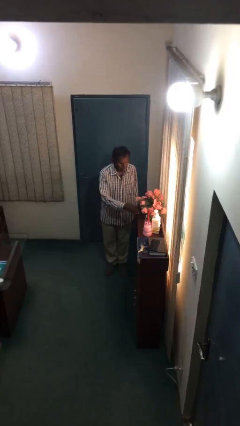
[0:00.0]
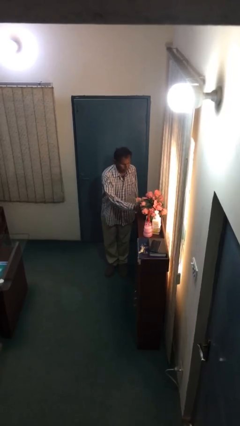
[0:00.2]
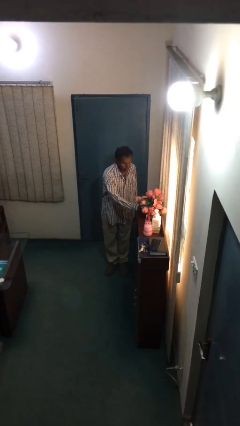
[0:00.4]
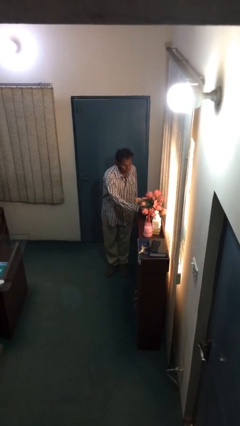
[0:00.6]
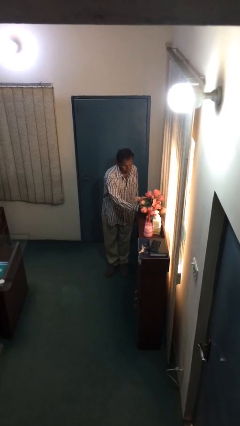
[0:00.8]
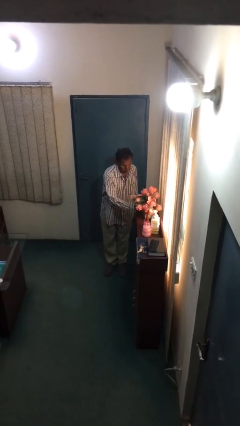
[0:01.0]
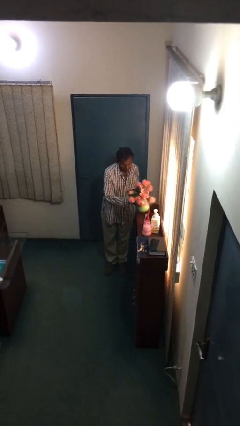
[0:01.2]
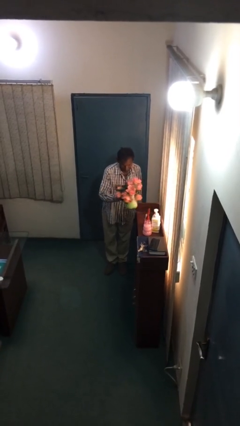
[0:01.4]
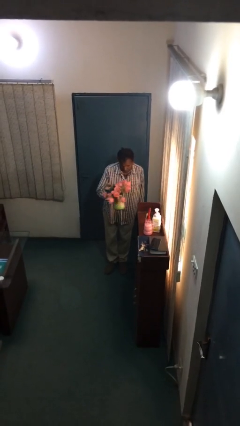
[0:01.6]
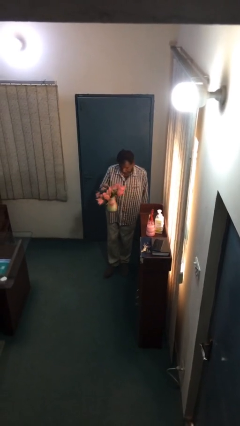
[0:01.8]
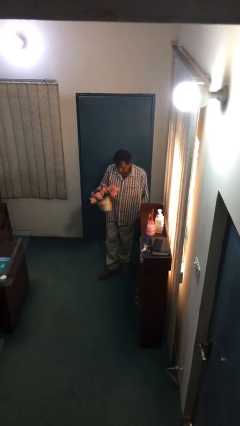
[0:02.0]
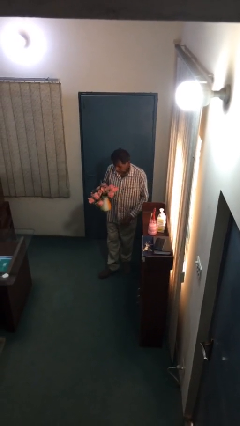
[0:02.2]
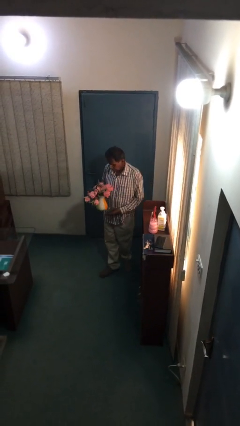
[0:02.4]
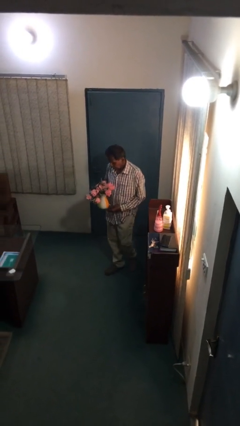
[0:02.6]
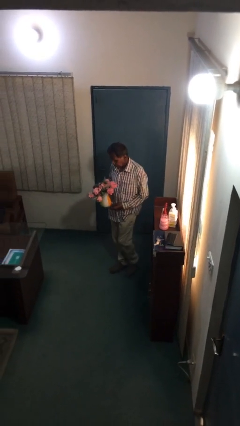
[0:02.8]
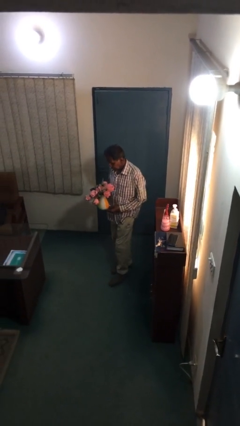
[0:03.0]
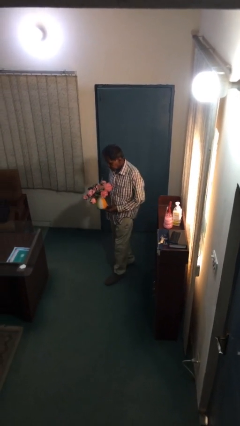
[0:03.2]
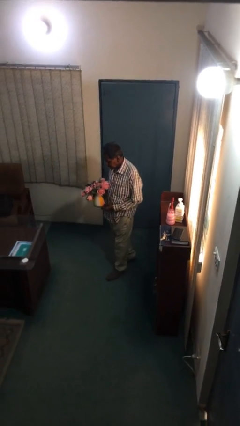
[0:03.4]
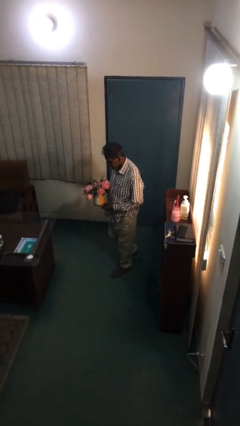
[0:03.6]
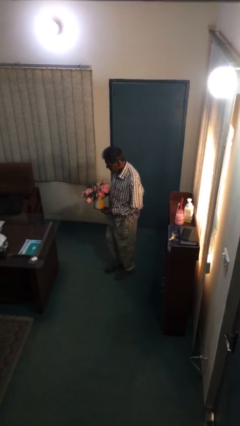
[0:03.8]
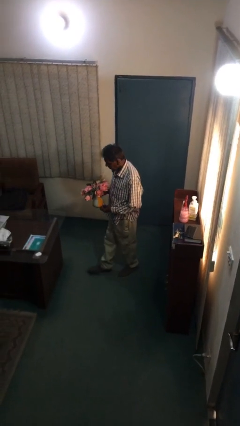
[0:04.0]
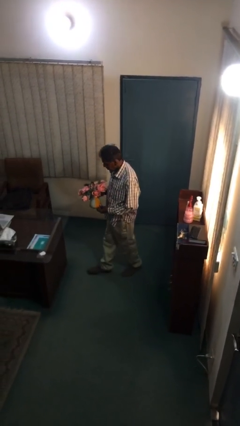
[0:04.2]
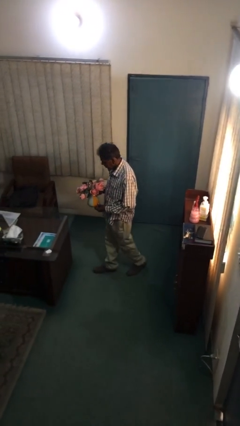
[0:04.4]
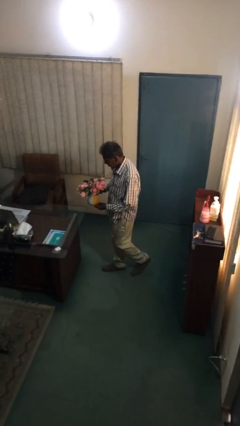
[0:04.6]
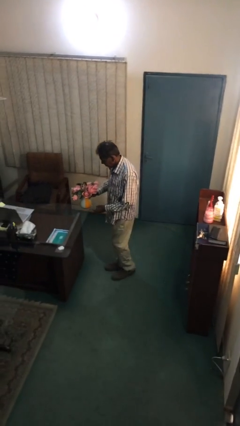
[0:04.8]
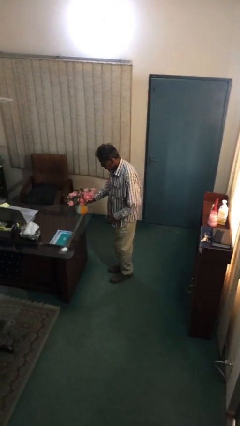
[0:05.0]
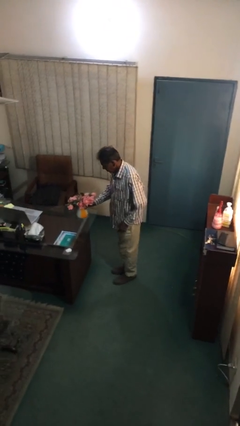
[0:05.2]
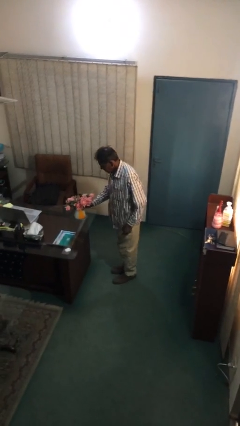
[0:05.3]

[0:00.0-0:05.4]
person picks up object from shelf

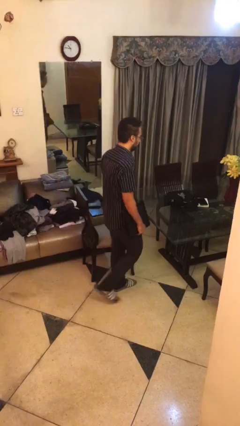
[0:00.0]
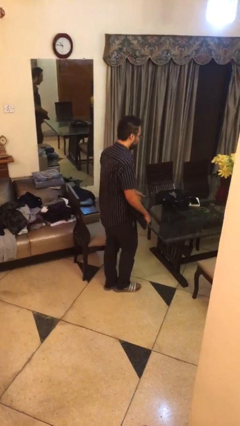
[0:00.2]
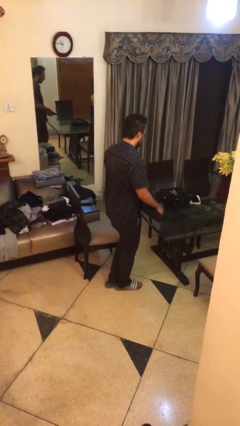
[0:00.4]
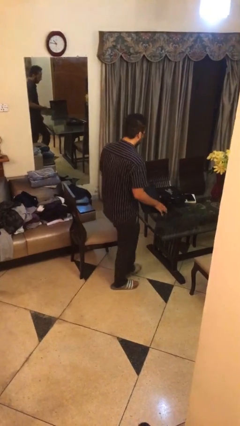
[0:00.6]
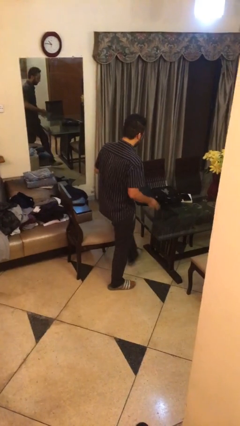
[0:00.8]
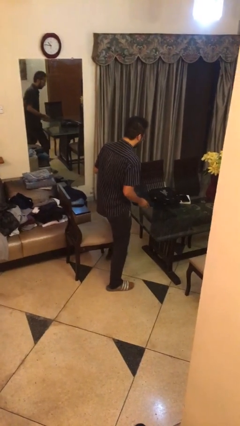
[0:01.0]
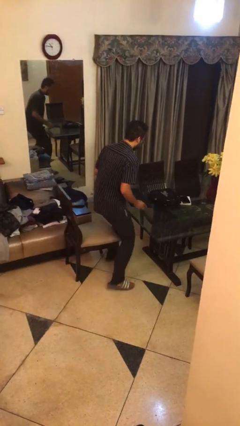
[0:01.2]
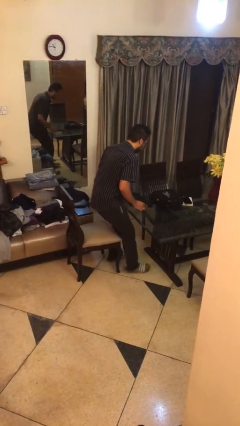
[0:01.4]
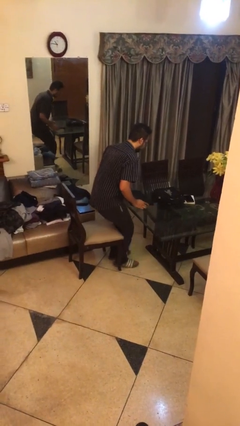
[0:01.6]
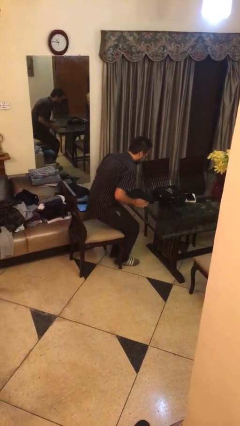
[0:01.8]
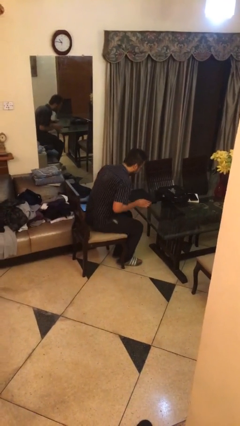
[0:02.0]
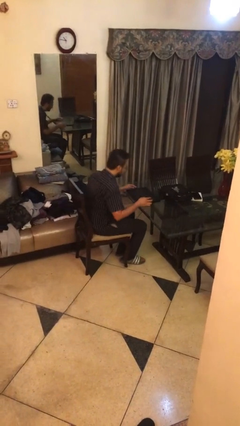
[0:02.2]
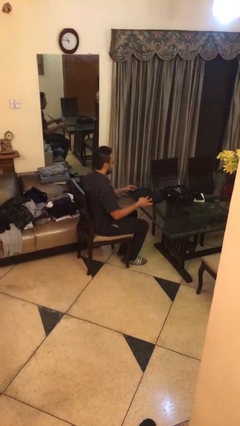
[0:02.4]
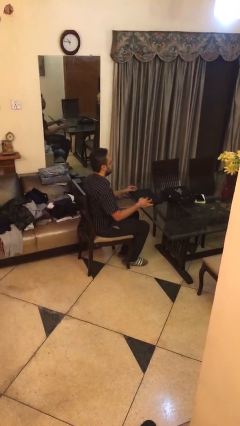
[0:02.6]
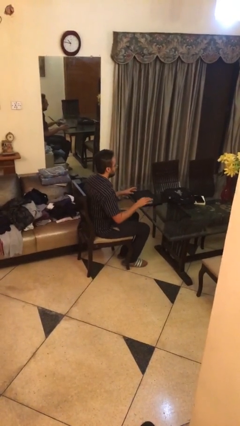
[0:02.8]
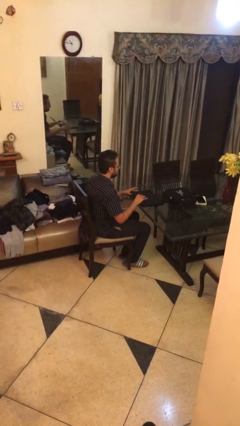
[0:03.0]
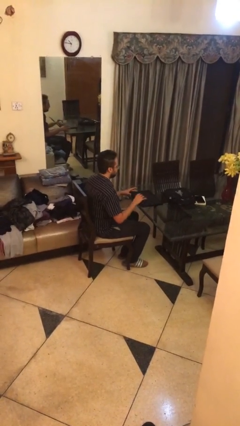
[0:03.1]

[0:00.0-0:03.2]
person sits down

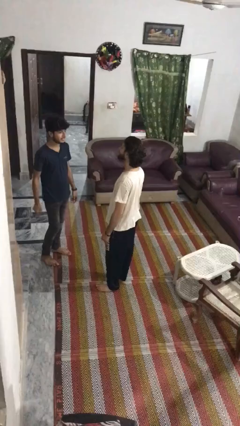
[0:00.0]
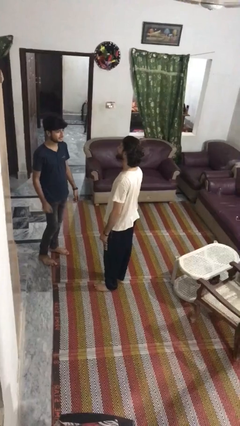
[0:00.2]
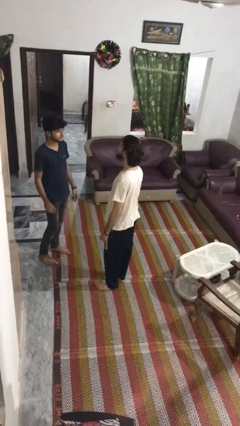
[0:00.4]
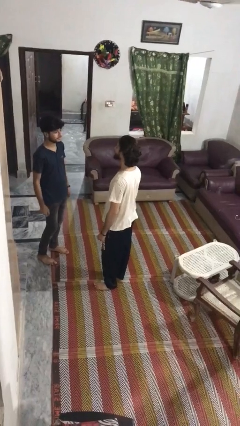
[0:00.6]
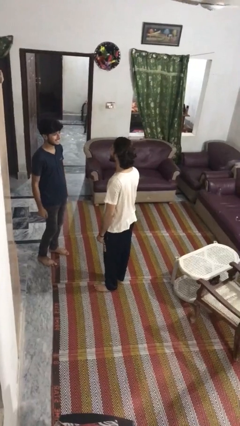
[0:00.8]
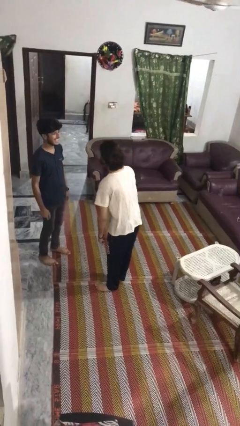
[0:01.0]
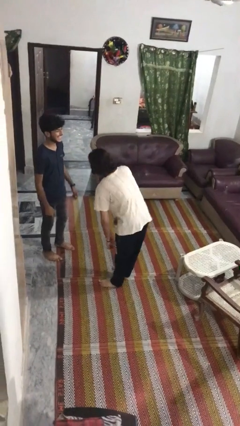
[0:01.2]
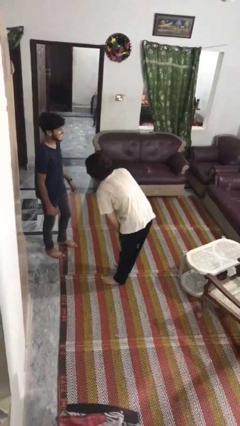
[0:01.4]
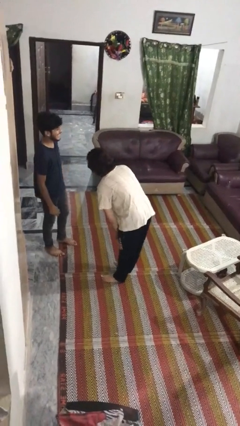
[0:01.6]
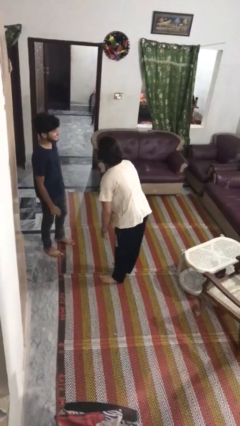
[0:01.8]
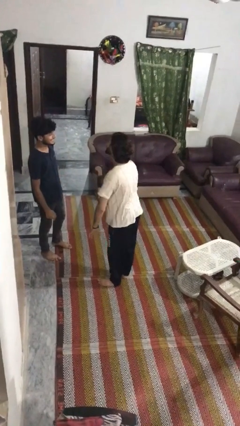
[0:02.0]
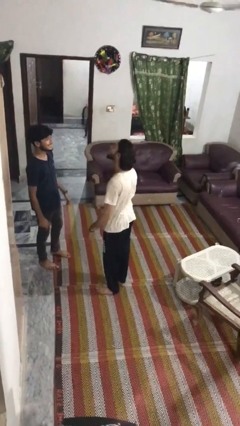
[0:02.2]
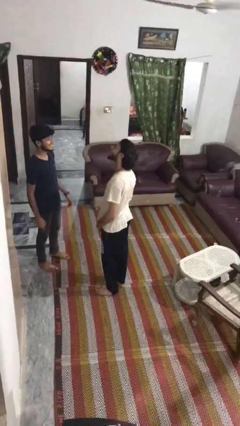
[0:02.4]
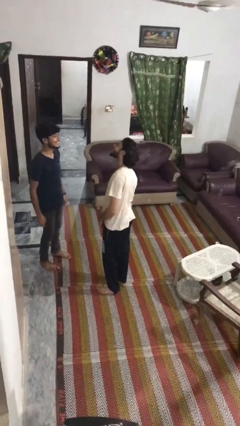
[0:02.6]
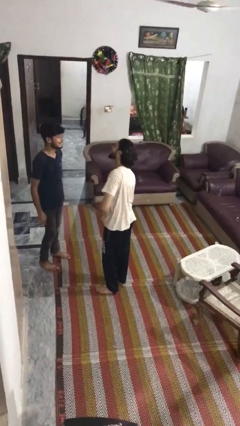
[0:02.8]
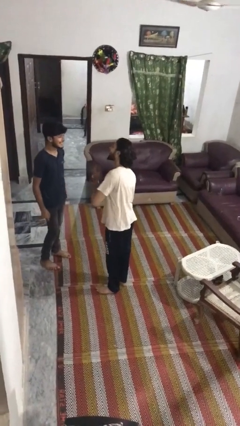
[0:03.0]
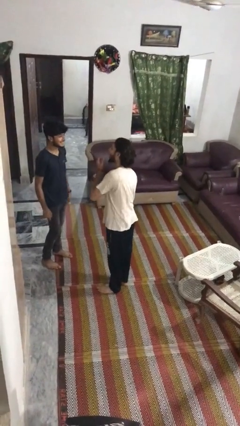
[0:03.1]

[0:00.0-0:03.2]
person laughs with person

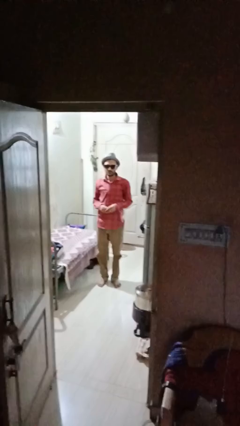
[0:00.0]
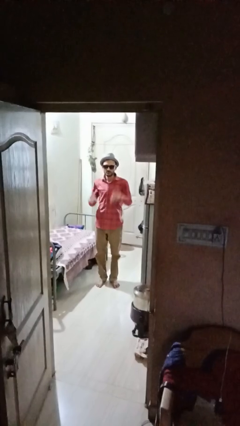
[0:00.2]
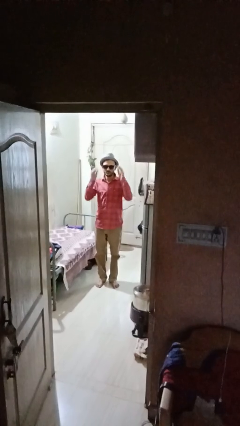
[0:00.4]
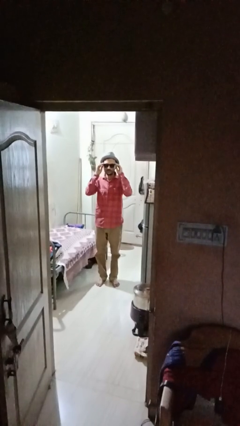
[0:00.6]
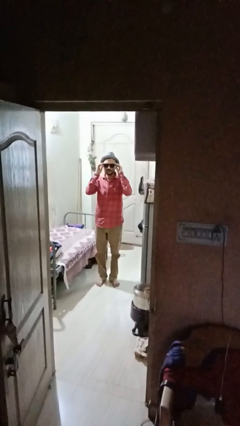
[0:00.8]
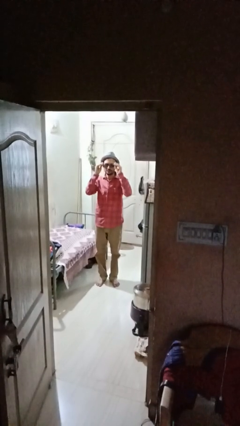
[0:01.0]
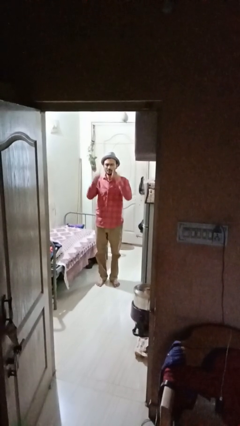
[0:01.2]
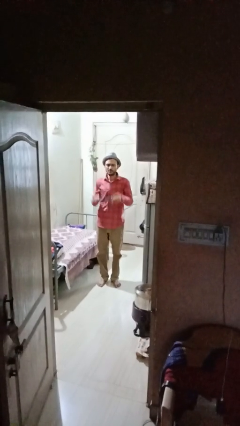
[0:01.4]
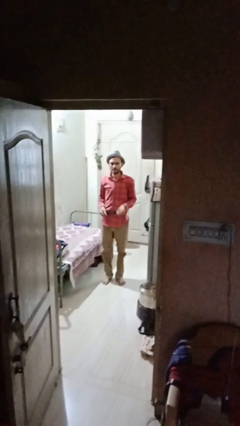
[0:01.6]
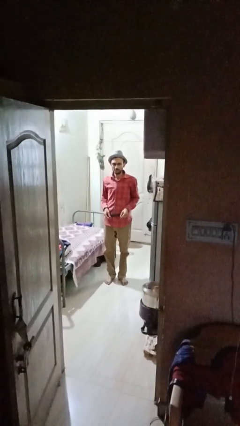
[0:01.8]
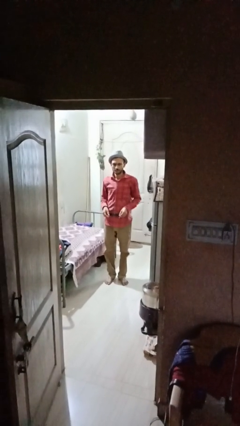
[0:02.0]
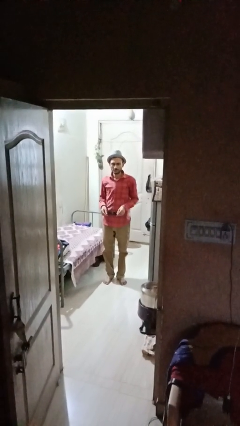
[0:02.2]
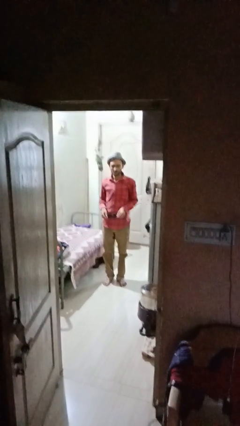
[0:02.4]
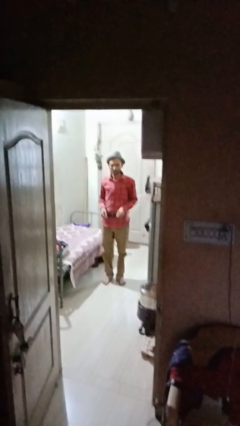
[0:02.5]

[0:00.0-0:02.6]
person takes off sunglasses

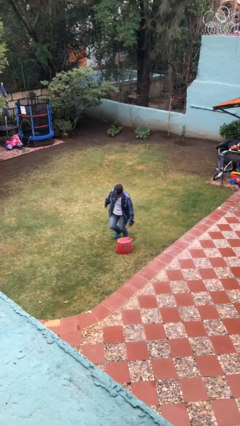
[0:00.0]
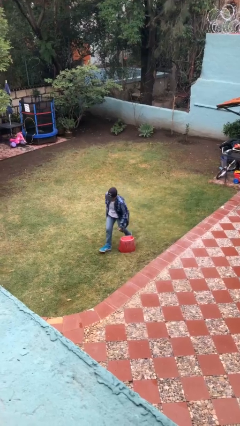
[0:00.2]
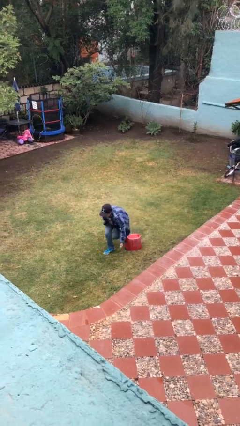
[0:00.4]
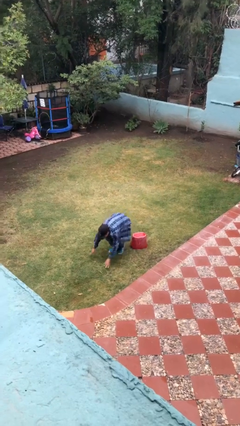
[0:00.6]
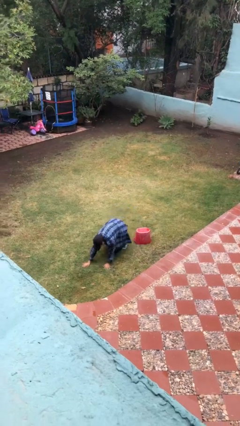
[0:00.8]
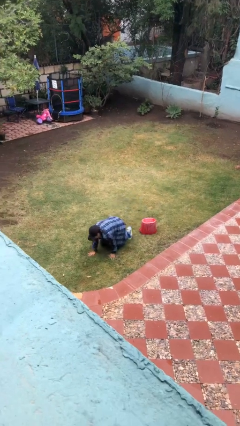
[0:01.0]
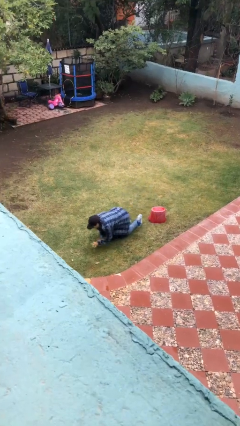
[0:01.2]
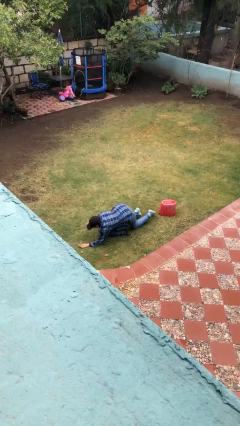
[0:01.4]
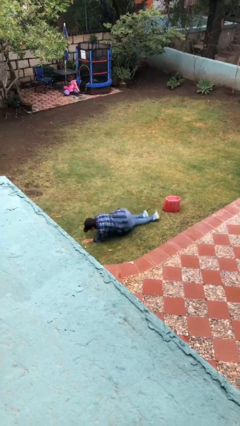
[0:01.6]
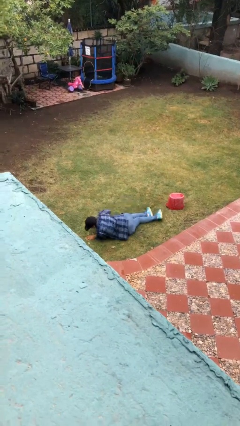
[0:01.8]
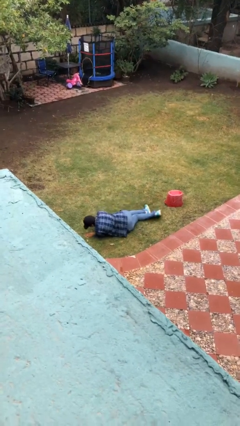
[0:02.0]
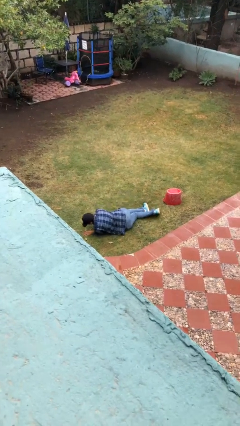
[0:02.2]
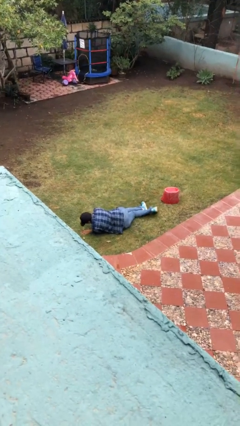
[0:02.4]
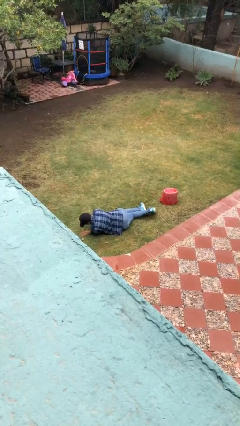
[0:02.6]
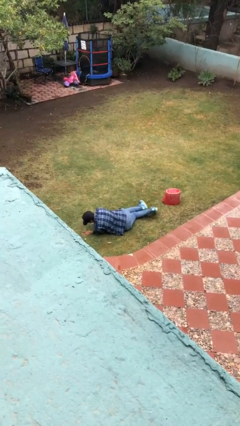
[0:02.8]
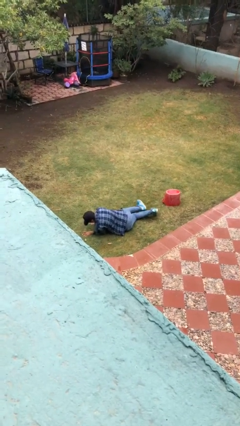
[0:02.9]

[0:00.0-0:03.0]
person lies down on floor
